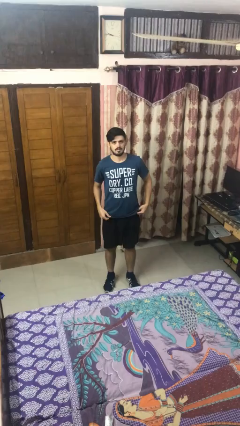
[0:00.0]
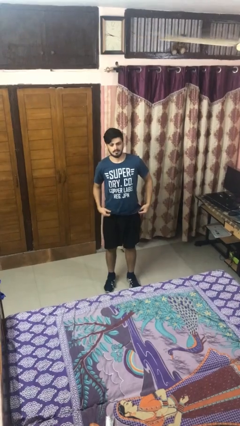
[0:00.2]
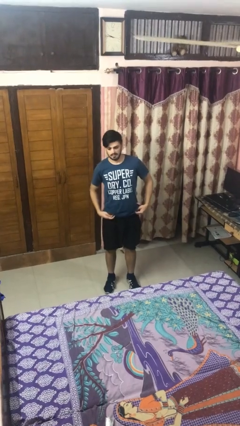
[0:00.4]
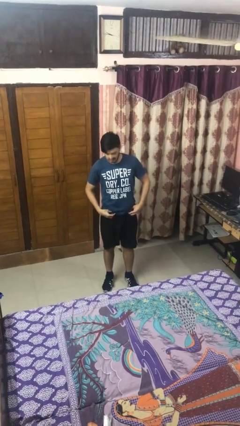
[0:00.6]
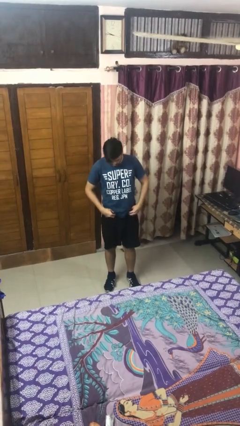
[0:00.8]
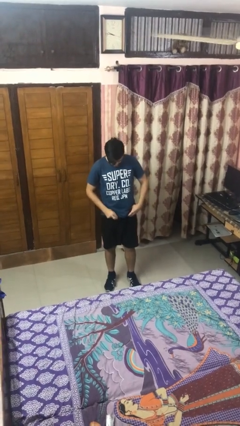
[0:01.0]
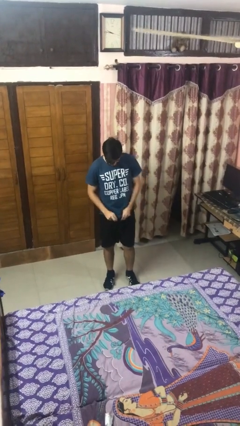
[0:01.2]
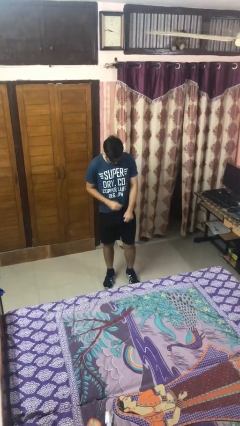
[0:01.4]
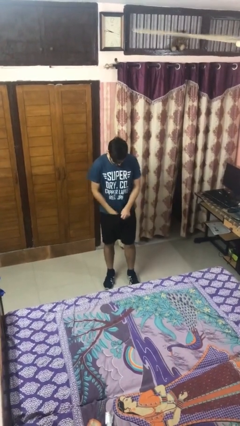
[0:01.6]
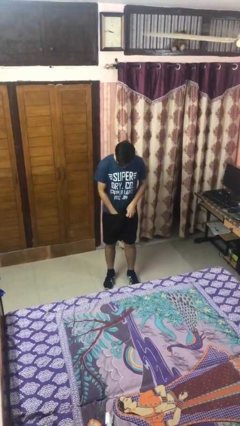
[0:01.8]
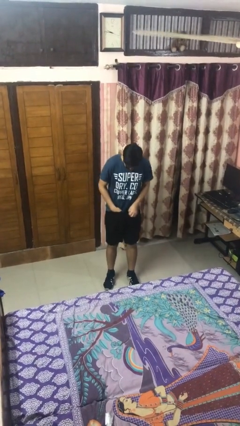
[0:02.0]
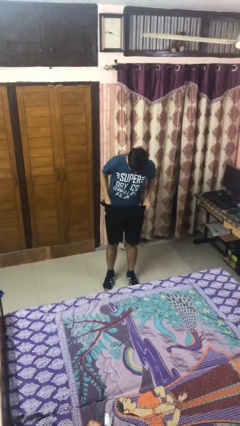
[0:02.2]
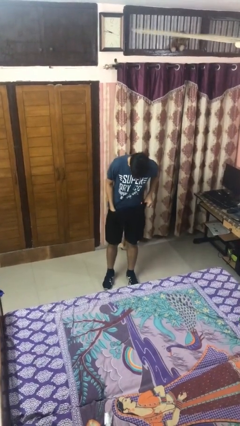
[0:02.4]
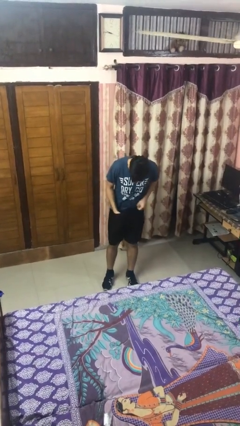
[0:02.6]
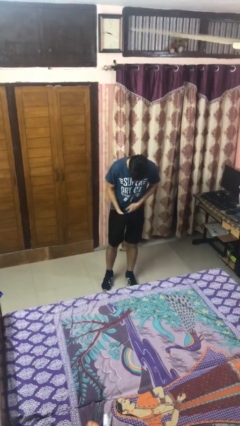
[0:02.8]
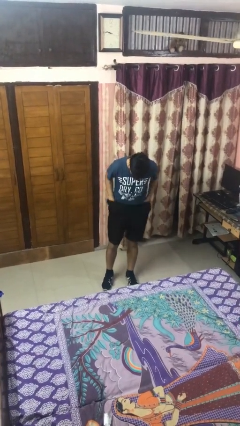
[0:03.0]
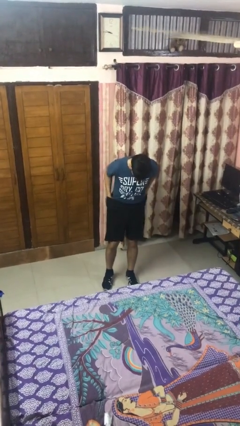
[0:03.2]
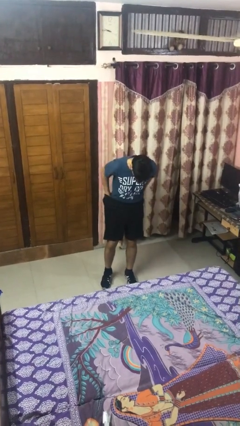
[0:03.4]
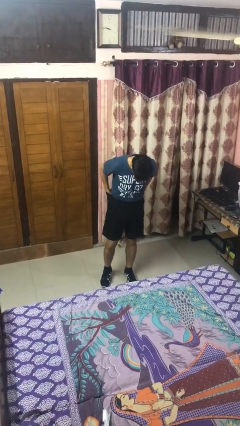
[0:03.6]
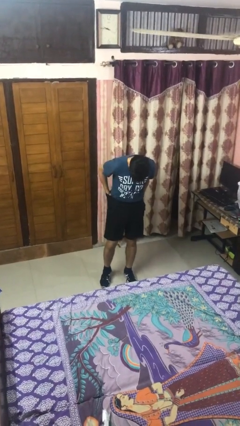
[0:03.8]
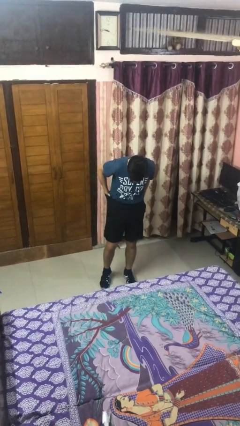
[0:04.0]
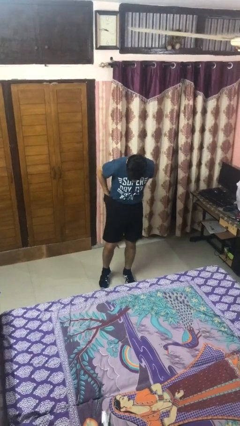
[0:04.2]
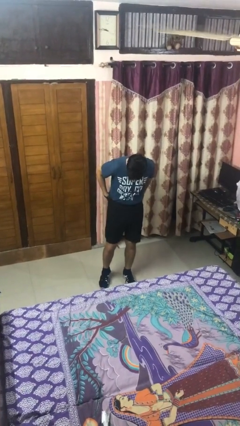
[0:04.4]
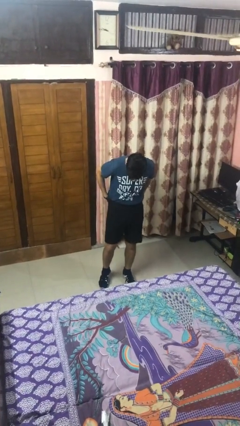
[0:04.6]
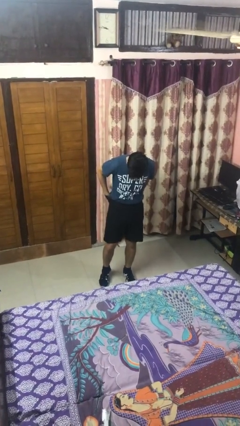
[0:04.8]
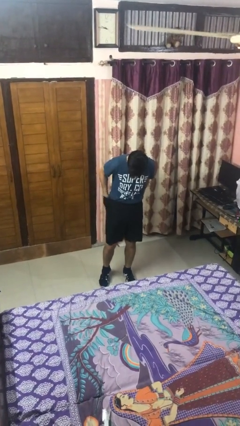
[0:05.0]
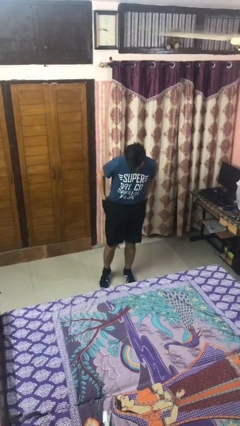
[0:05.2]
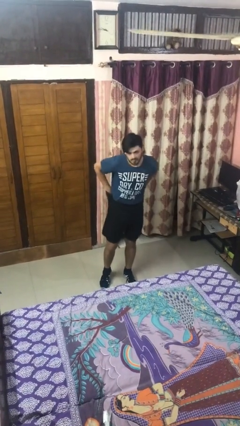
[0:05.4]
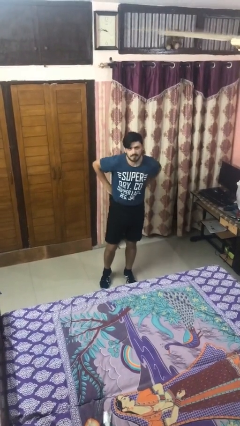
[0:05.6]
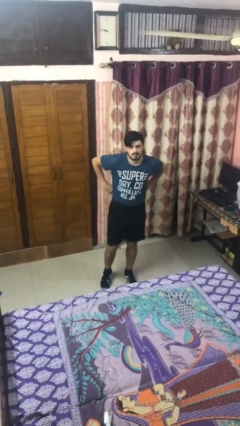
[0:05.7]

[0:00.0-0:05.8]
person tucks in shirt

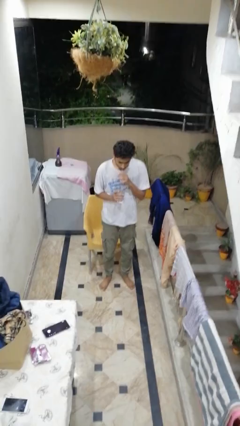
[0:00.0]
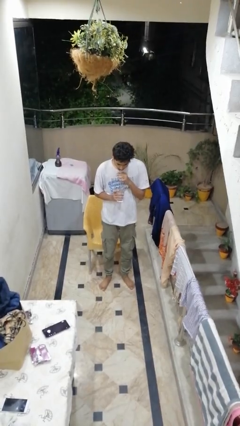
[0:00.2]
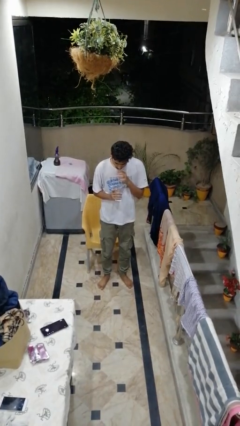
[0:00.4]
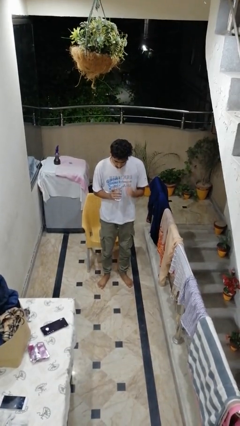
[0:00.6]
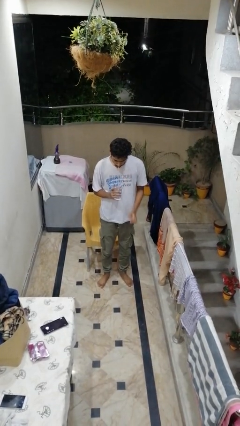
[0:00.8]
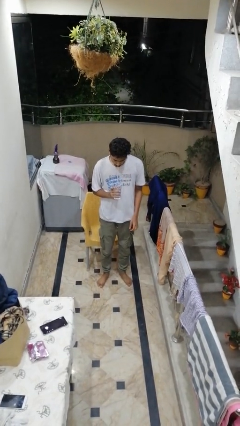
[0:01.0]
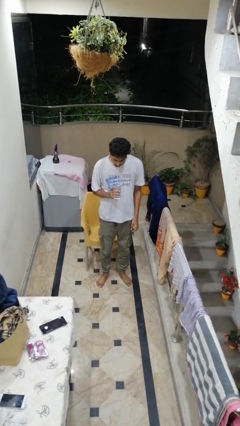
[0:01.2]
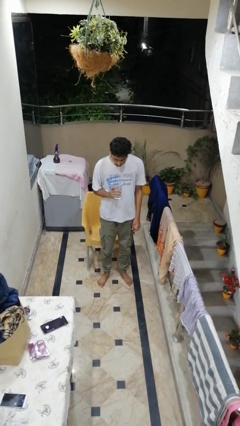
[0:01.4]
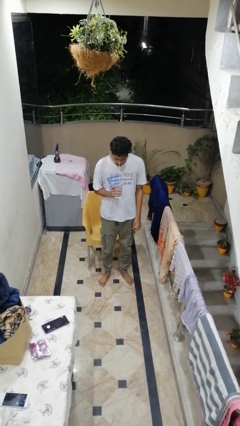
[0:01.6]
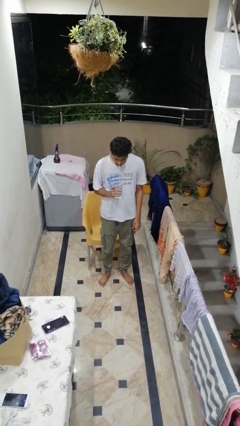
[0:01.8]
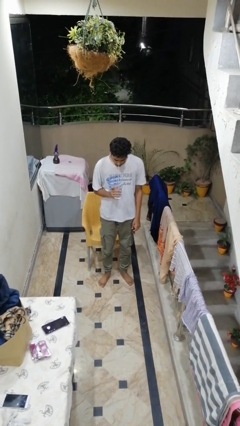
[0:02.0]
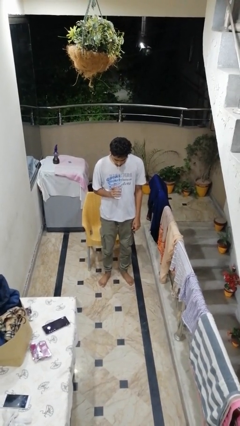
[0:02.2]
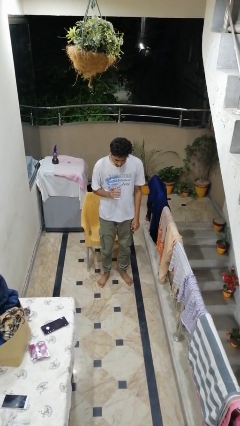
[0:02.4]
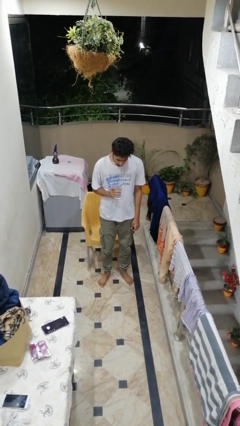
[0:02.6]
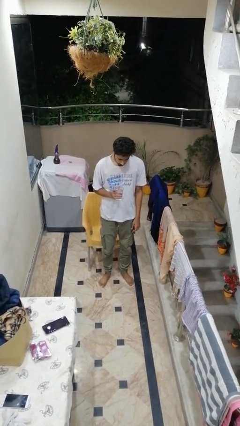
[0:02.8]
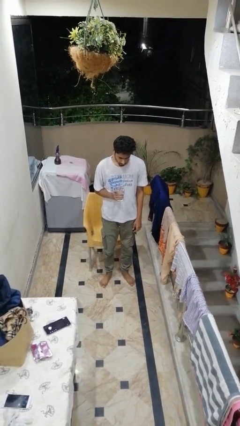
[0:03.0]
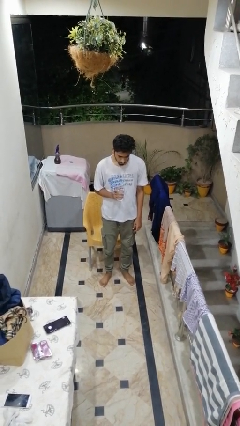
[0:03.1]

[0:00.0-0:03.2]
person drinks from straw

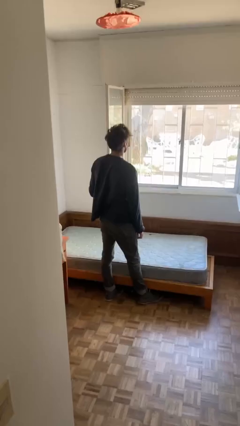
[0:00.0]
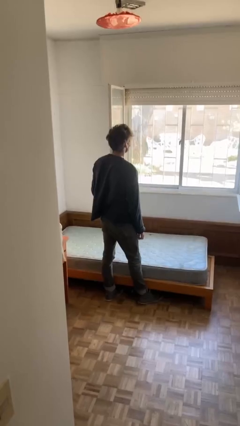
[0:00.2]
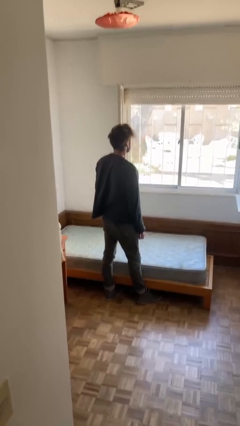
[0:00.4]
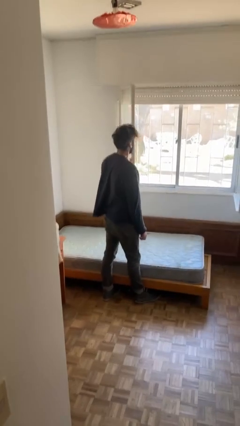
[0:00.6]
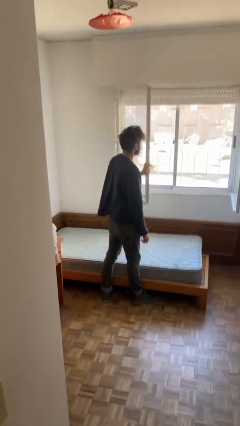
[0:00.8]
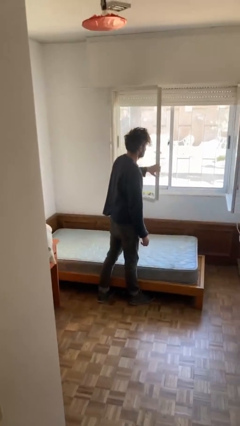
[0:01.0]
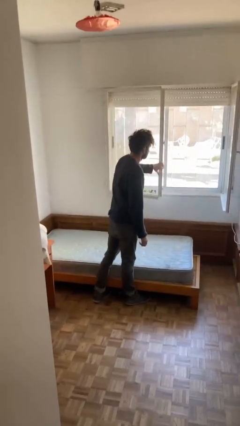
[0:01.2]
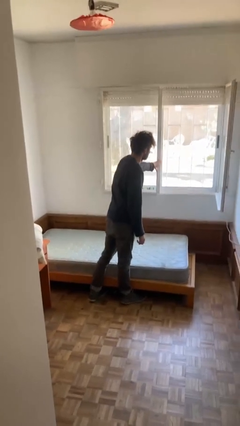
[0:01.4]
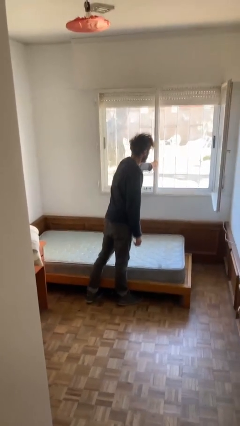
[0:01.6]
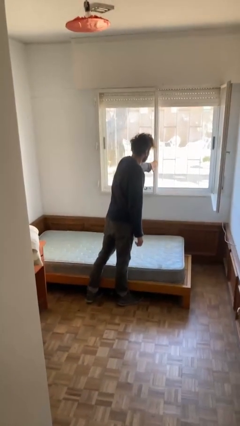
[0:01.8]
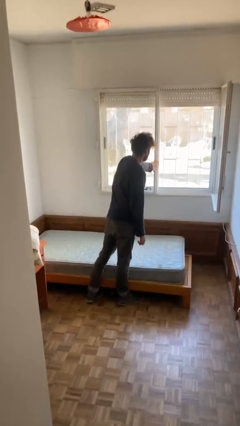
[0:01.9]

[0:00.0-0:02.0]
person closes home window

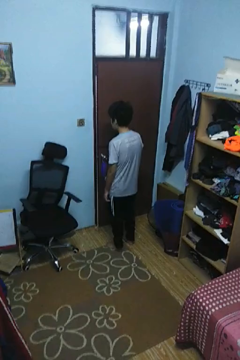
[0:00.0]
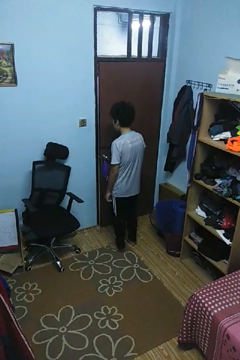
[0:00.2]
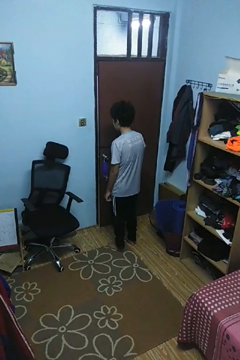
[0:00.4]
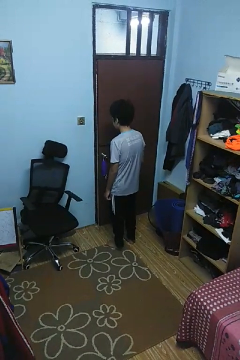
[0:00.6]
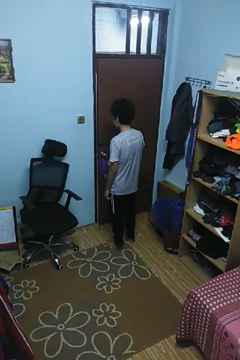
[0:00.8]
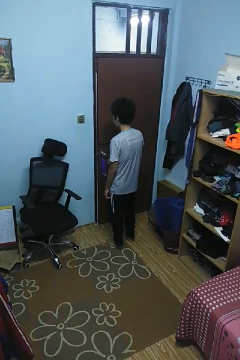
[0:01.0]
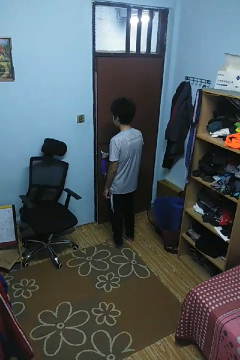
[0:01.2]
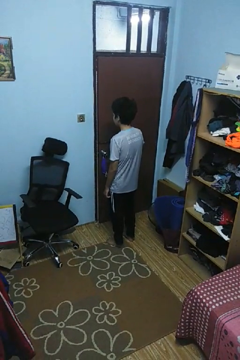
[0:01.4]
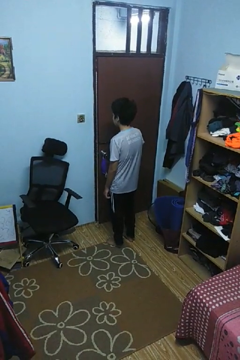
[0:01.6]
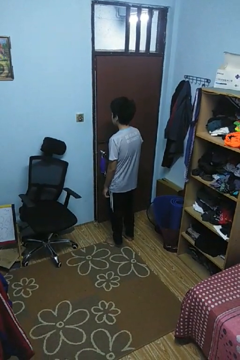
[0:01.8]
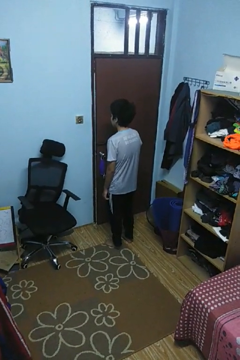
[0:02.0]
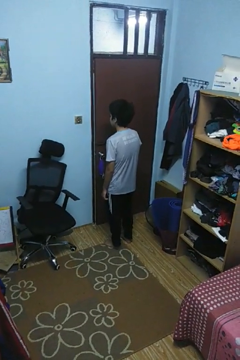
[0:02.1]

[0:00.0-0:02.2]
person unlocks door with keys

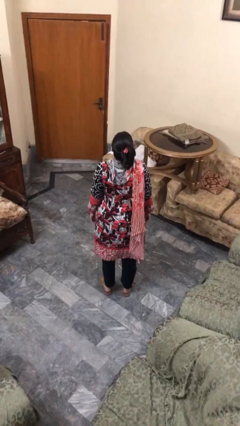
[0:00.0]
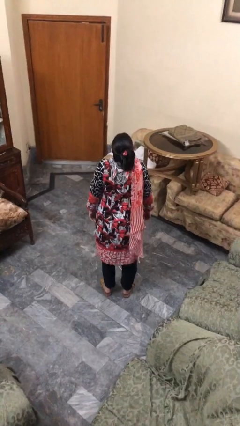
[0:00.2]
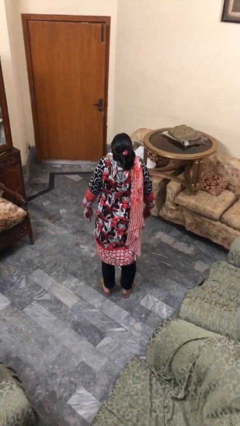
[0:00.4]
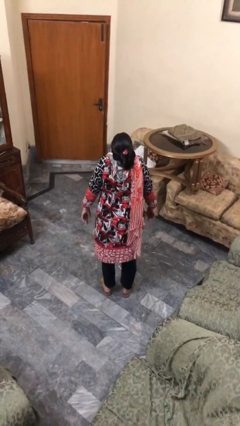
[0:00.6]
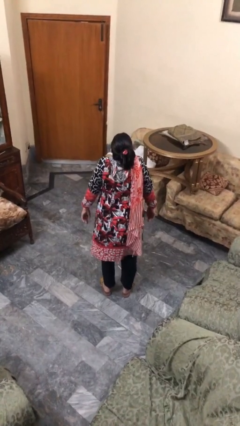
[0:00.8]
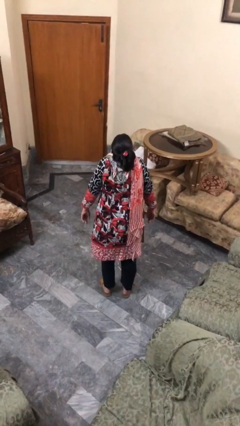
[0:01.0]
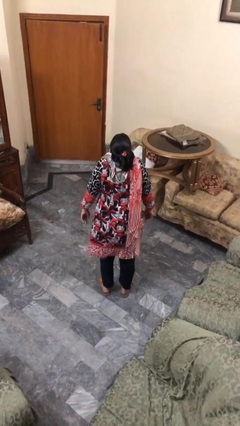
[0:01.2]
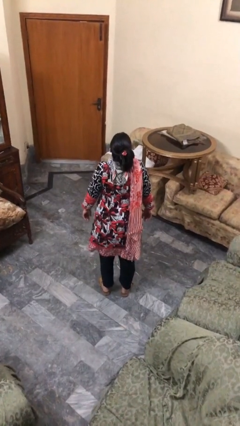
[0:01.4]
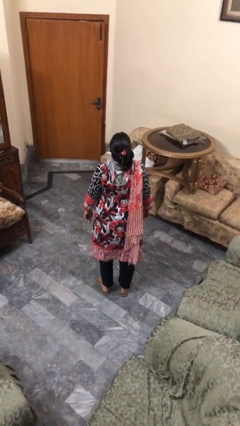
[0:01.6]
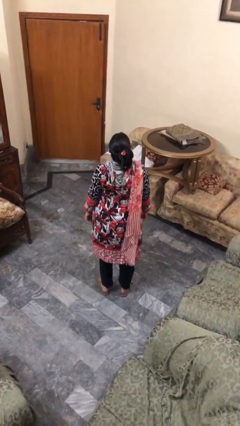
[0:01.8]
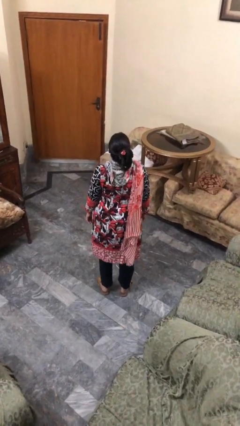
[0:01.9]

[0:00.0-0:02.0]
person shrugs

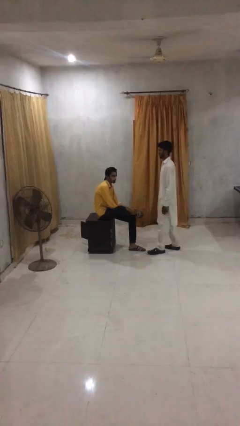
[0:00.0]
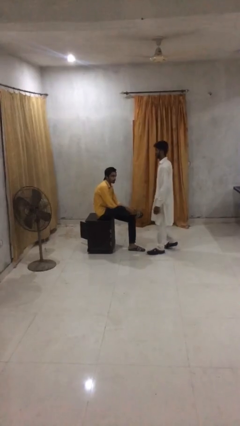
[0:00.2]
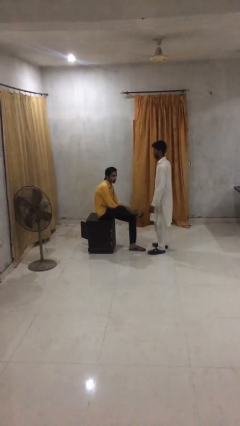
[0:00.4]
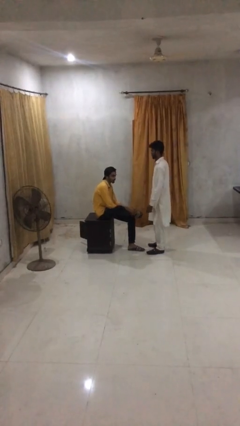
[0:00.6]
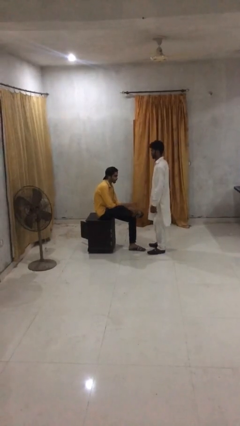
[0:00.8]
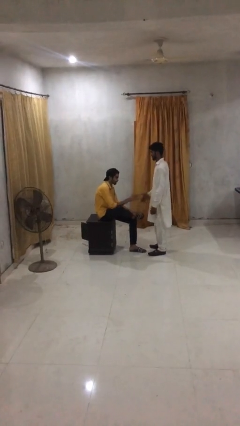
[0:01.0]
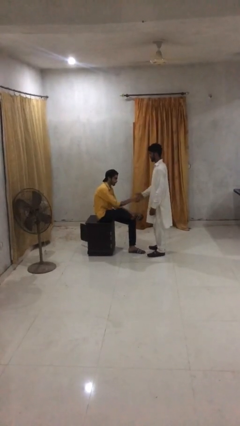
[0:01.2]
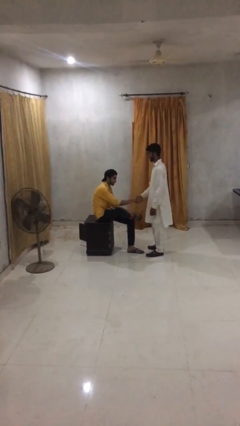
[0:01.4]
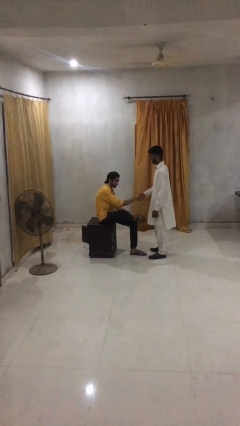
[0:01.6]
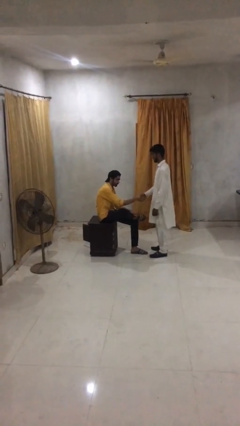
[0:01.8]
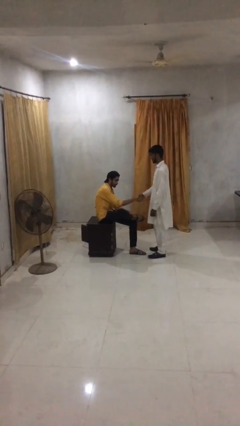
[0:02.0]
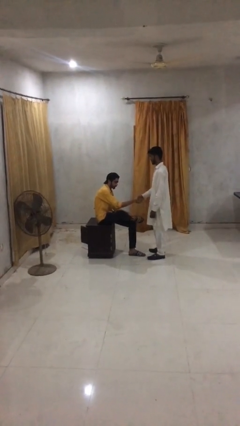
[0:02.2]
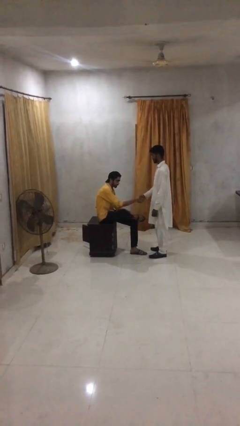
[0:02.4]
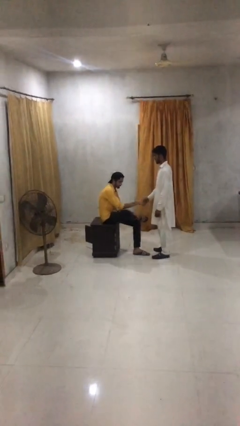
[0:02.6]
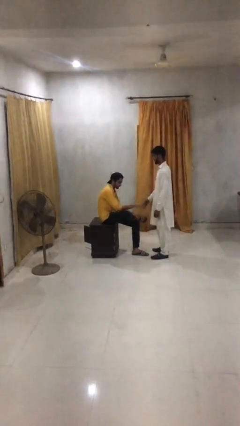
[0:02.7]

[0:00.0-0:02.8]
person shakes hand
